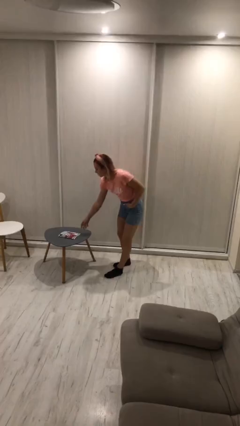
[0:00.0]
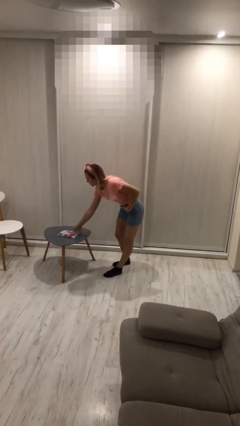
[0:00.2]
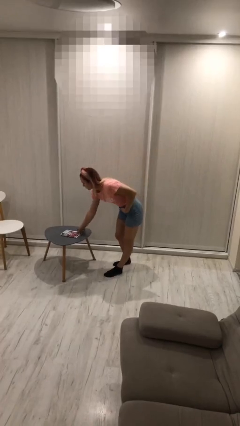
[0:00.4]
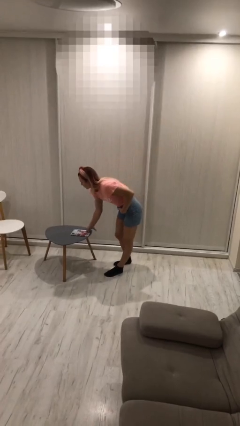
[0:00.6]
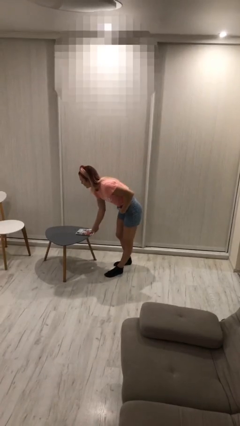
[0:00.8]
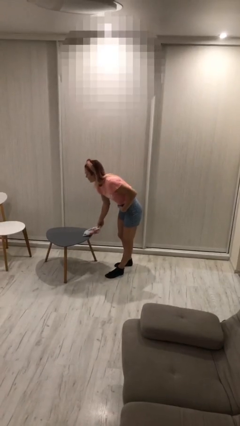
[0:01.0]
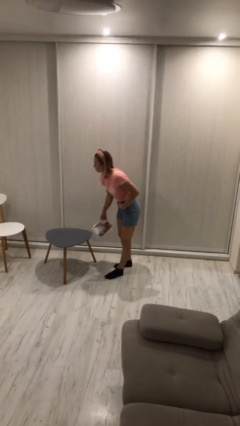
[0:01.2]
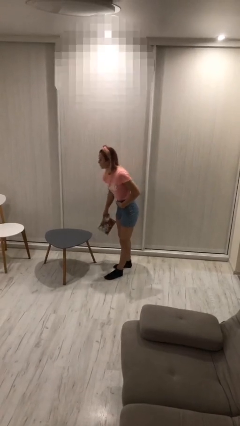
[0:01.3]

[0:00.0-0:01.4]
person picks up object from table

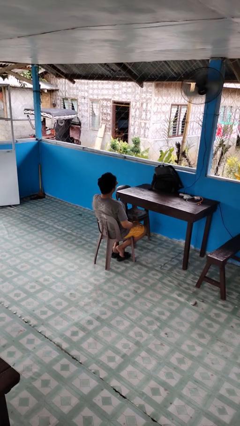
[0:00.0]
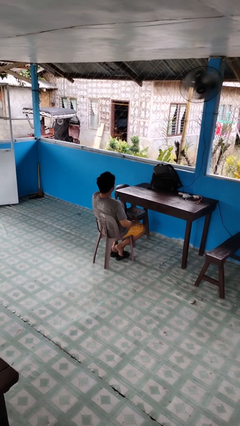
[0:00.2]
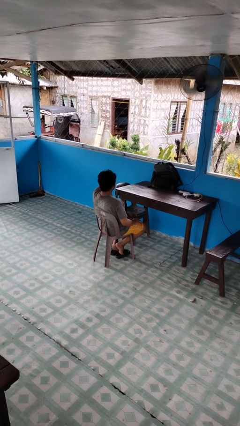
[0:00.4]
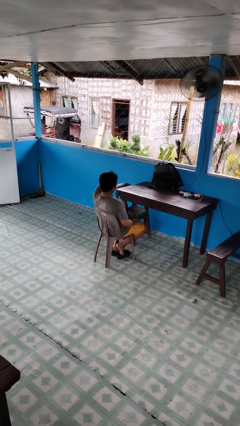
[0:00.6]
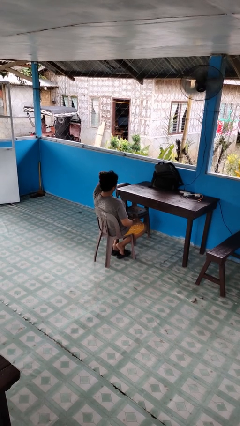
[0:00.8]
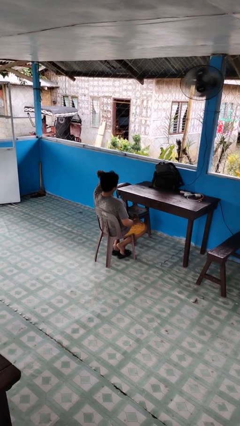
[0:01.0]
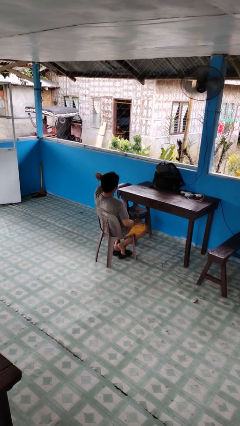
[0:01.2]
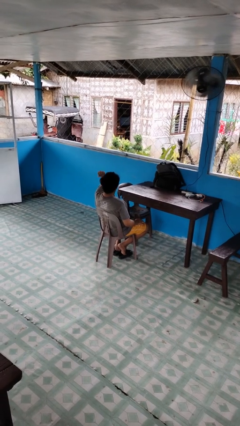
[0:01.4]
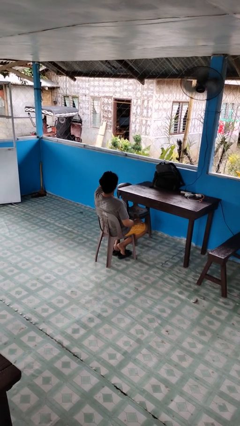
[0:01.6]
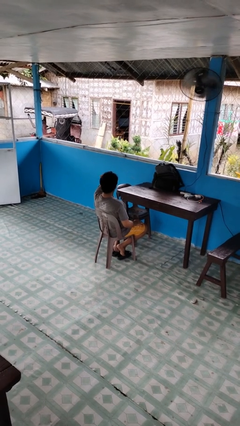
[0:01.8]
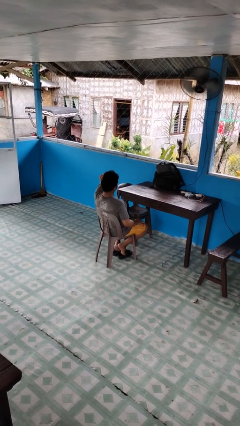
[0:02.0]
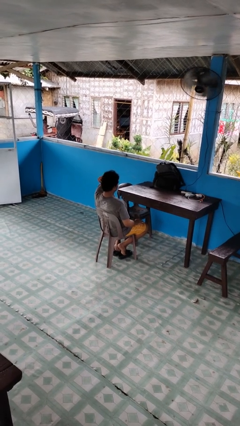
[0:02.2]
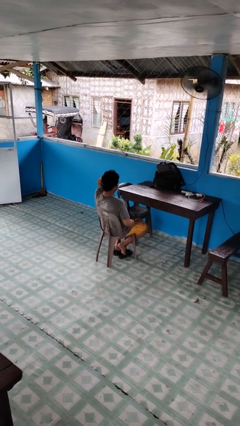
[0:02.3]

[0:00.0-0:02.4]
person strokes hair

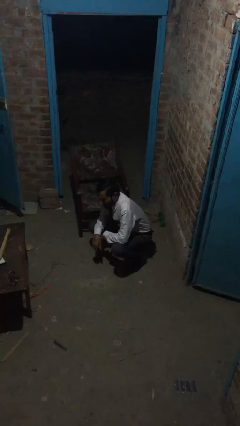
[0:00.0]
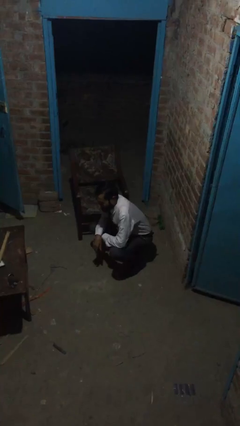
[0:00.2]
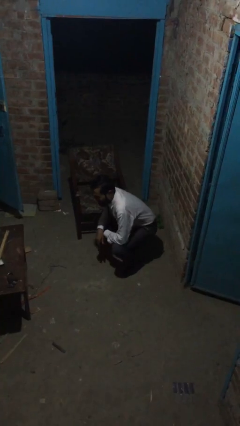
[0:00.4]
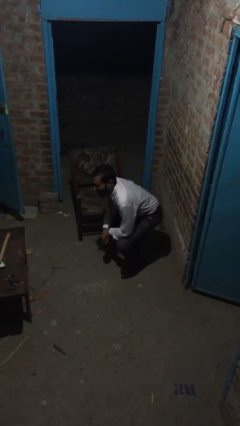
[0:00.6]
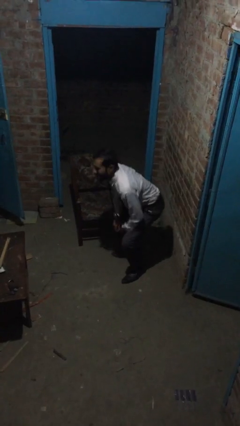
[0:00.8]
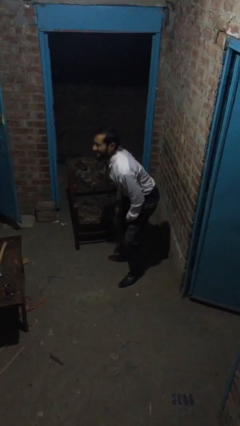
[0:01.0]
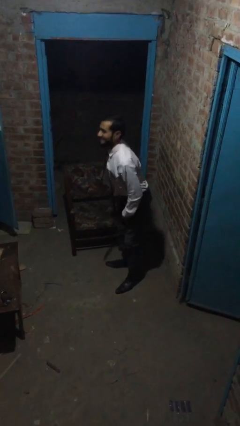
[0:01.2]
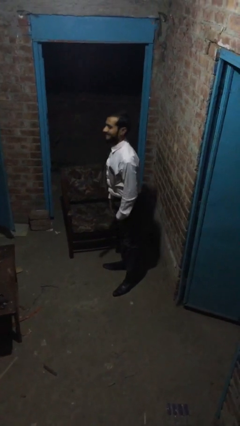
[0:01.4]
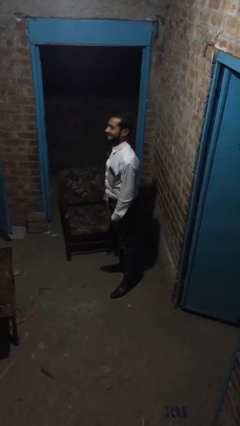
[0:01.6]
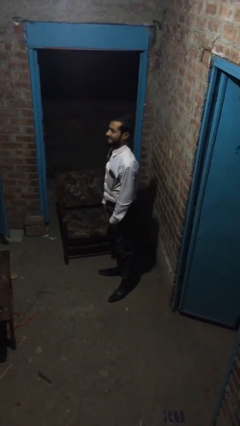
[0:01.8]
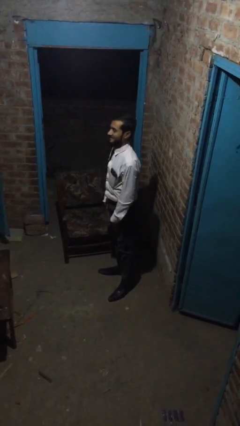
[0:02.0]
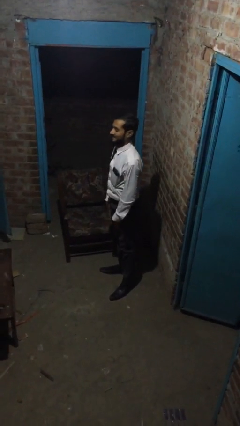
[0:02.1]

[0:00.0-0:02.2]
person stands up

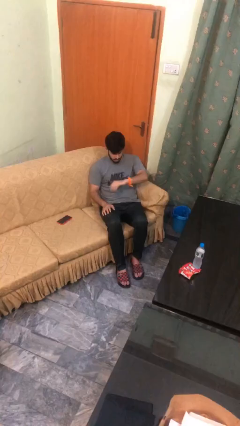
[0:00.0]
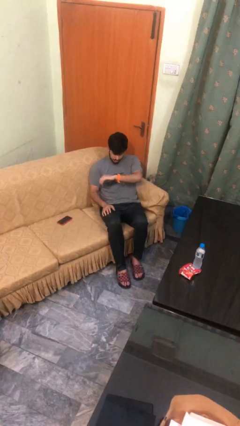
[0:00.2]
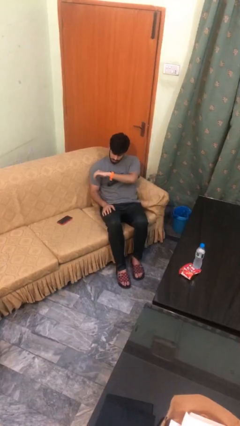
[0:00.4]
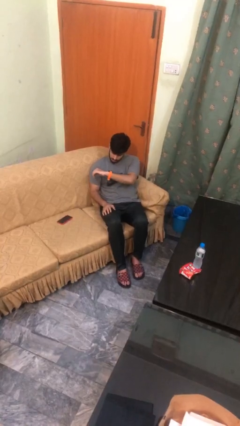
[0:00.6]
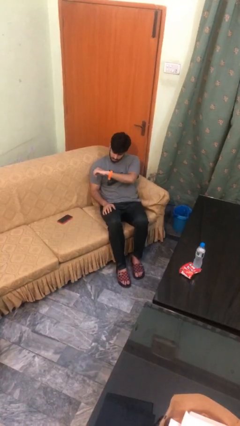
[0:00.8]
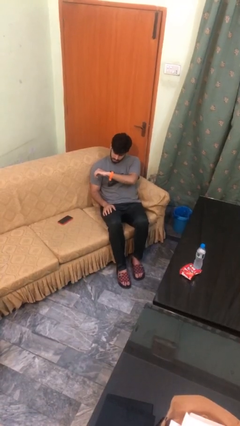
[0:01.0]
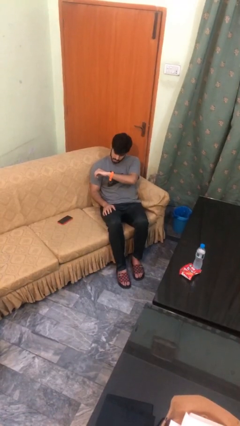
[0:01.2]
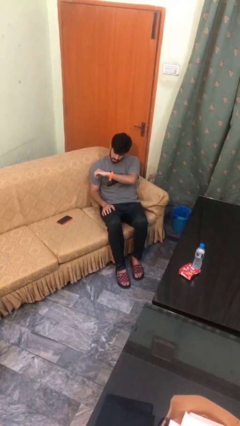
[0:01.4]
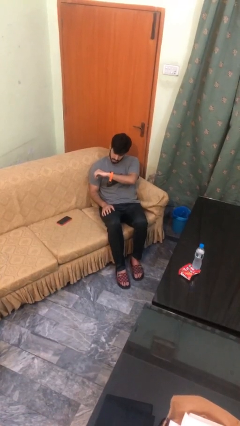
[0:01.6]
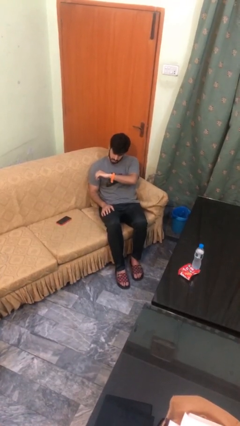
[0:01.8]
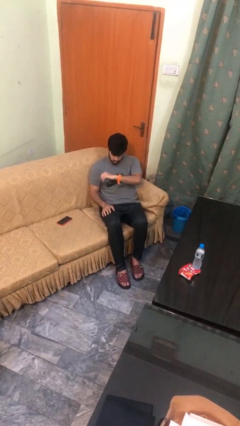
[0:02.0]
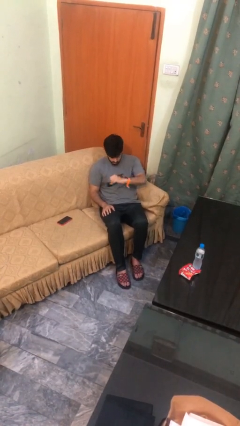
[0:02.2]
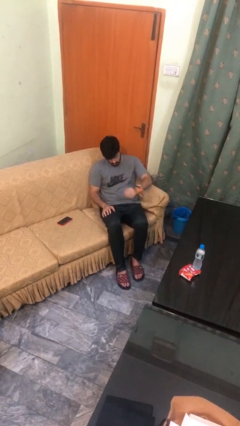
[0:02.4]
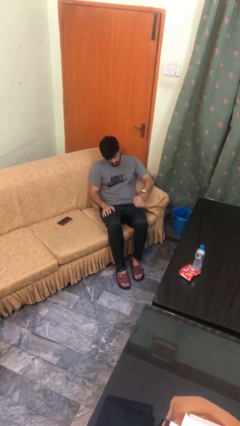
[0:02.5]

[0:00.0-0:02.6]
person looks at wristwatch

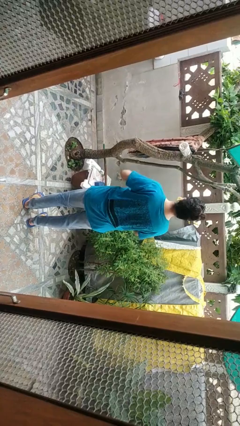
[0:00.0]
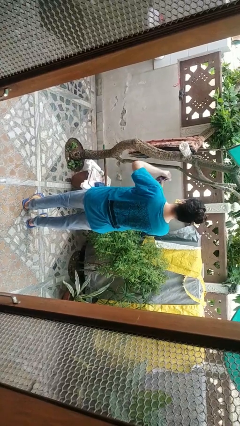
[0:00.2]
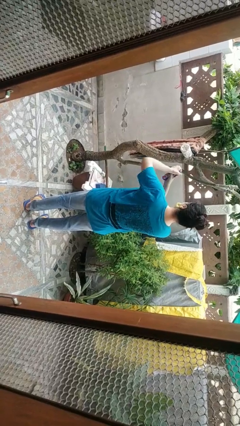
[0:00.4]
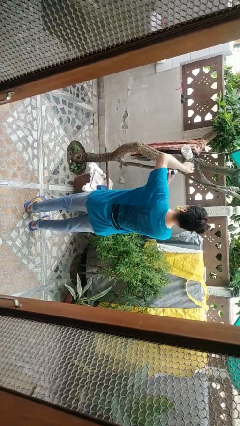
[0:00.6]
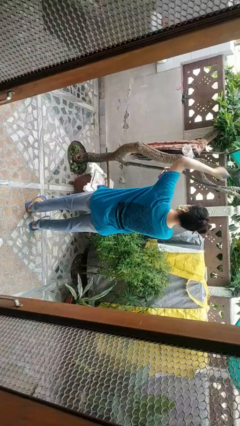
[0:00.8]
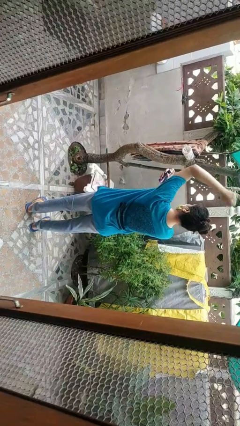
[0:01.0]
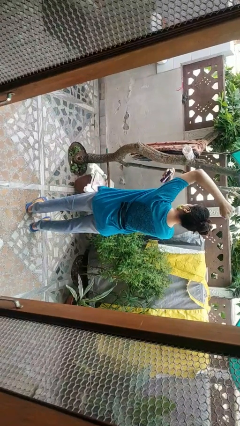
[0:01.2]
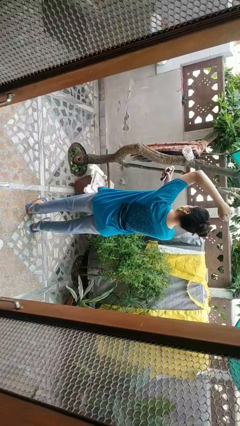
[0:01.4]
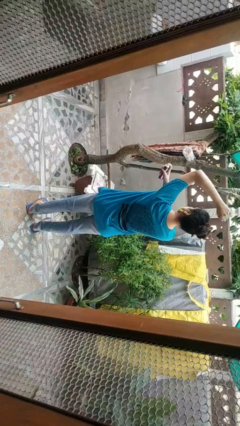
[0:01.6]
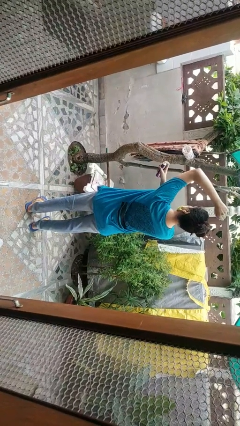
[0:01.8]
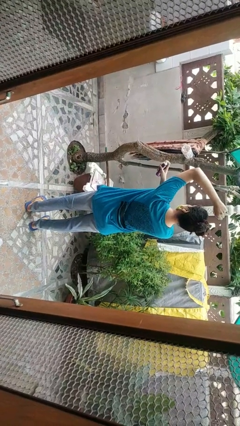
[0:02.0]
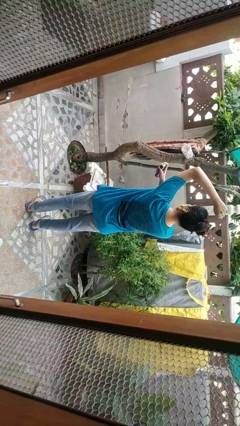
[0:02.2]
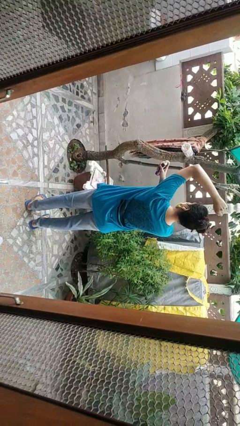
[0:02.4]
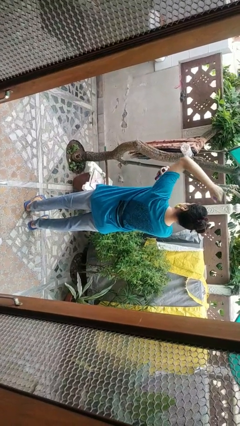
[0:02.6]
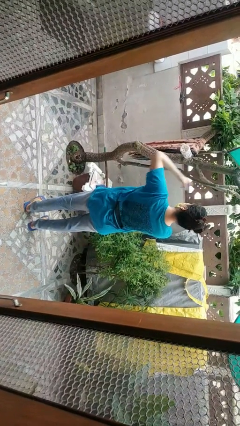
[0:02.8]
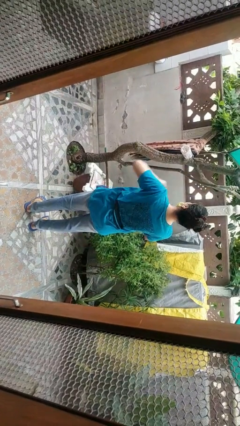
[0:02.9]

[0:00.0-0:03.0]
person applies deodorant

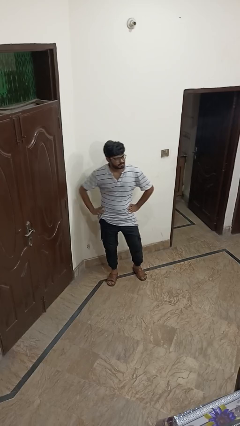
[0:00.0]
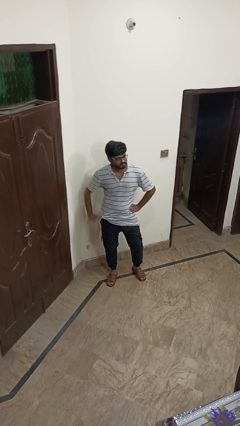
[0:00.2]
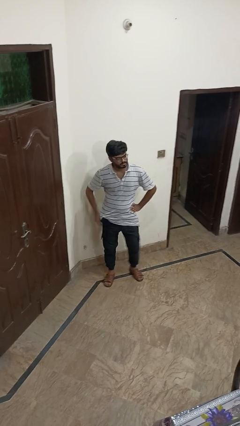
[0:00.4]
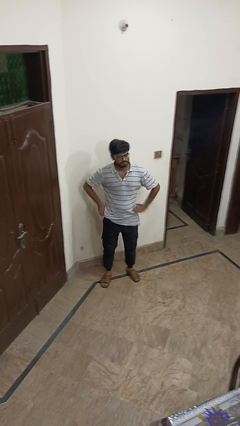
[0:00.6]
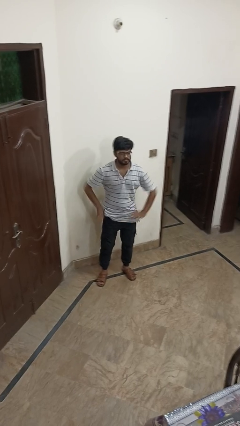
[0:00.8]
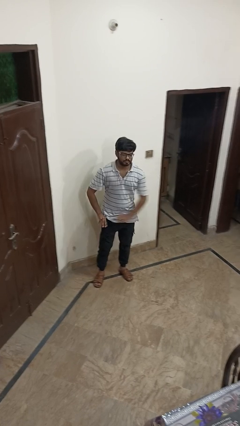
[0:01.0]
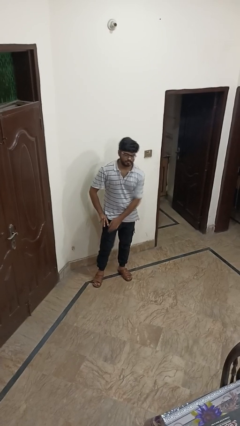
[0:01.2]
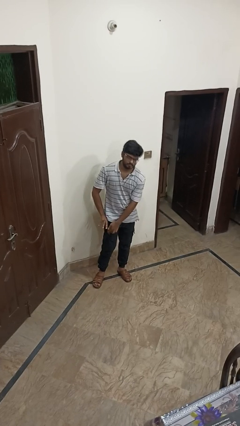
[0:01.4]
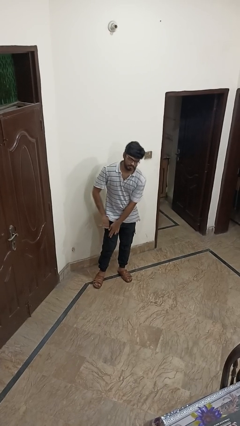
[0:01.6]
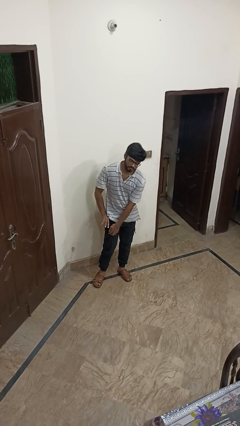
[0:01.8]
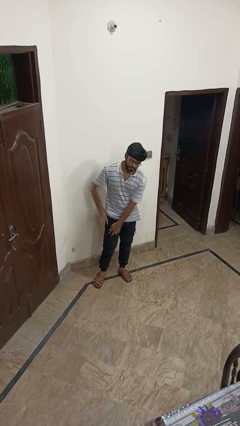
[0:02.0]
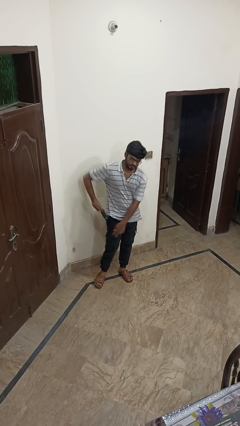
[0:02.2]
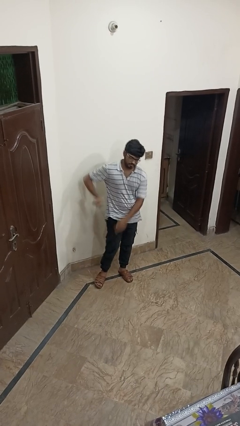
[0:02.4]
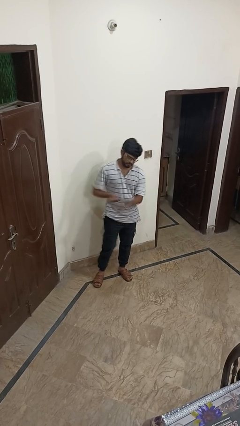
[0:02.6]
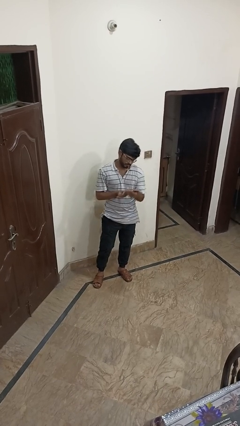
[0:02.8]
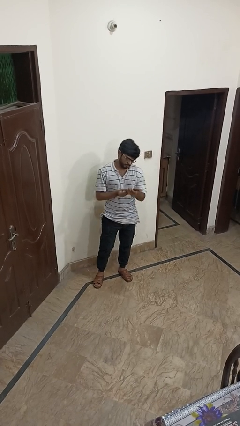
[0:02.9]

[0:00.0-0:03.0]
person takes phone from pocket

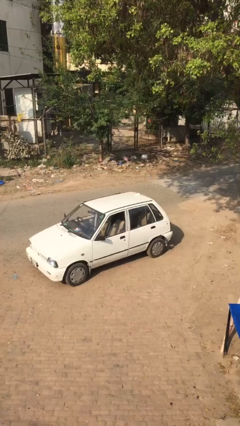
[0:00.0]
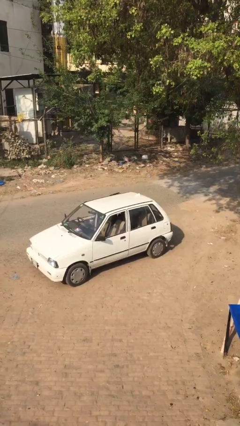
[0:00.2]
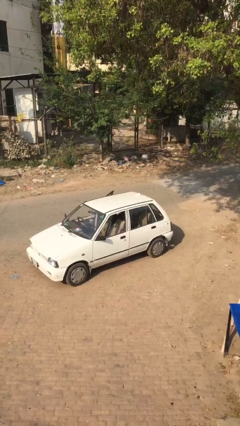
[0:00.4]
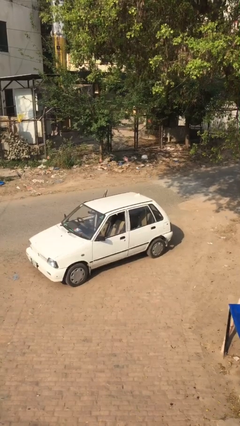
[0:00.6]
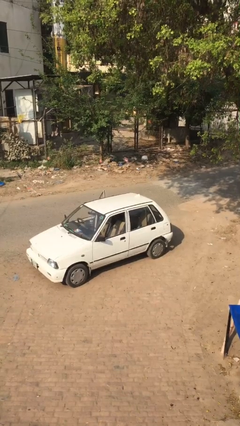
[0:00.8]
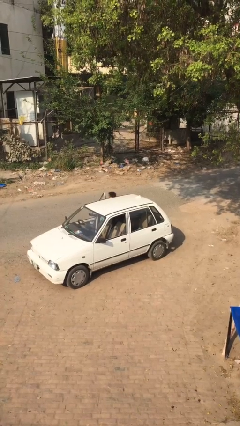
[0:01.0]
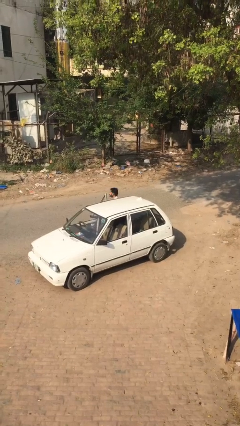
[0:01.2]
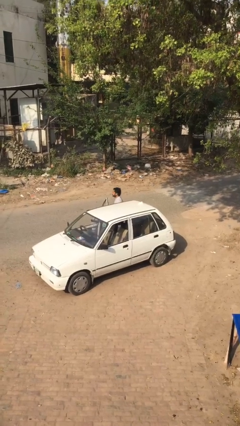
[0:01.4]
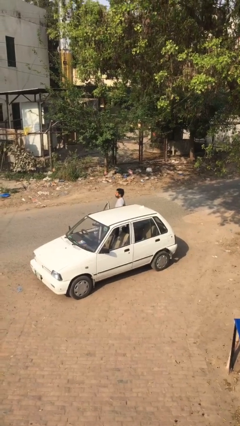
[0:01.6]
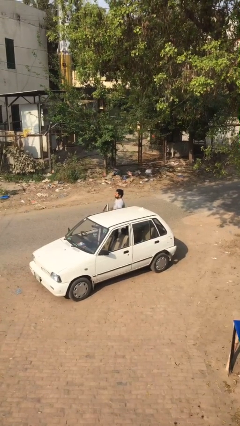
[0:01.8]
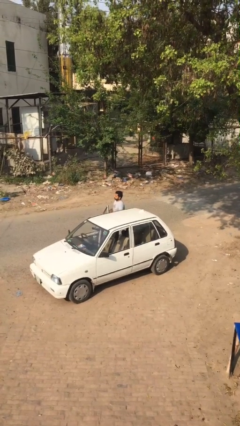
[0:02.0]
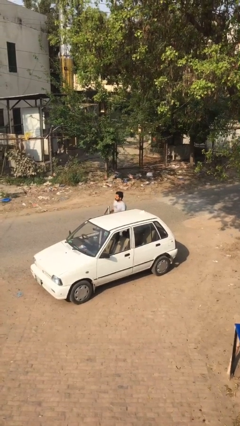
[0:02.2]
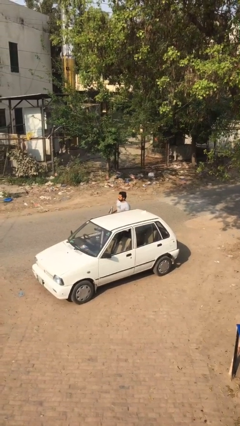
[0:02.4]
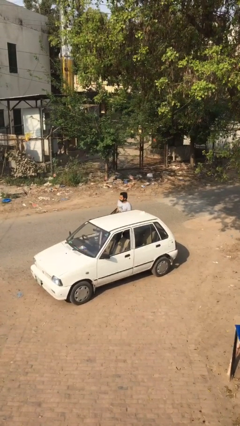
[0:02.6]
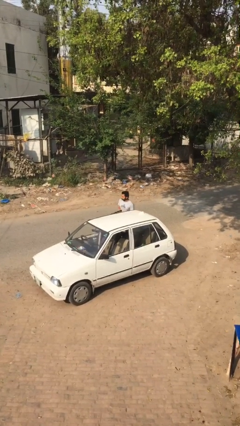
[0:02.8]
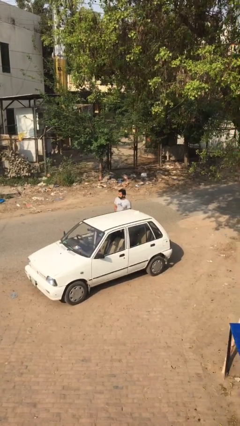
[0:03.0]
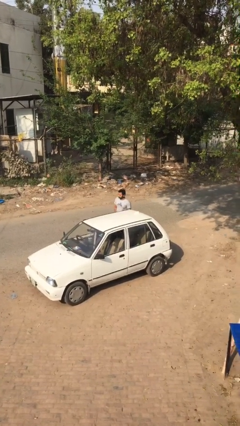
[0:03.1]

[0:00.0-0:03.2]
person exits car
